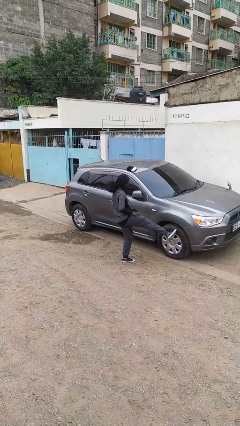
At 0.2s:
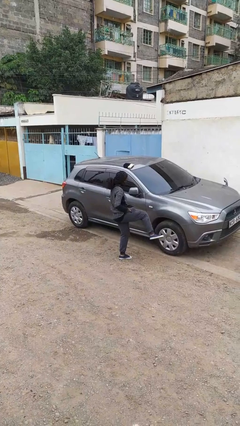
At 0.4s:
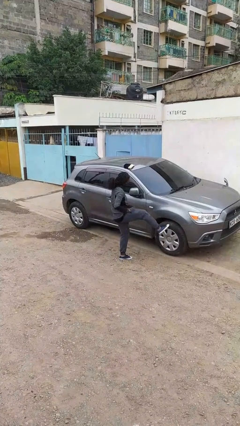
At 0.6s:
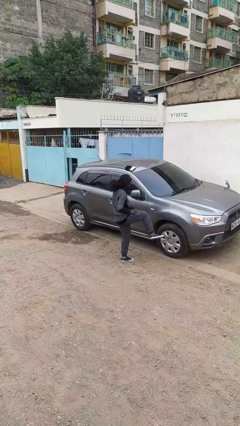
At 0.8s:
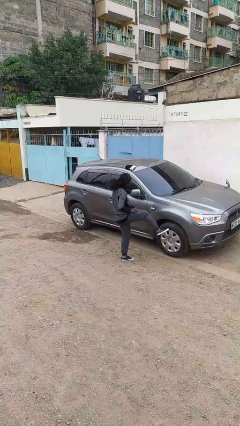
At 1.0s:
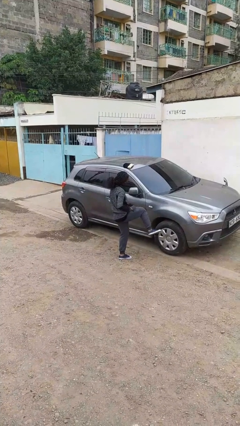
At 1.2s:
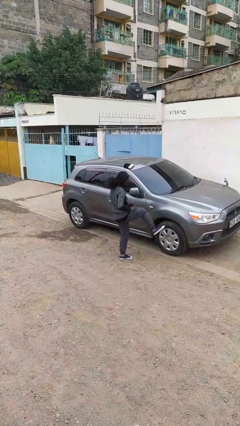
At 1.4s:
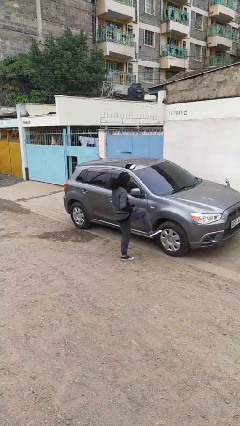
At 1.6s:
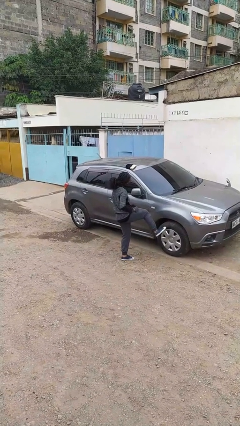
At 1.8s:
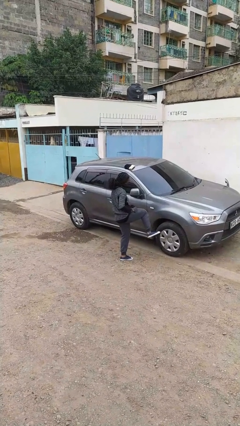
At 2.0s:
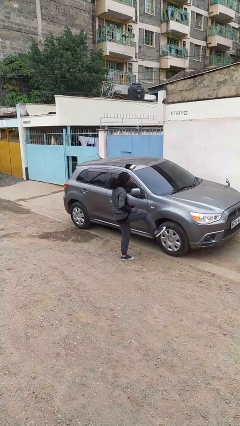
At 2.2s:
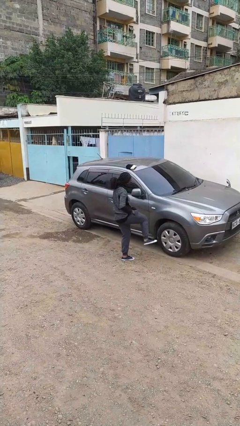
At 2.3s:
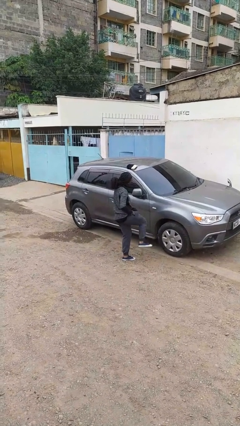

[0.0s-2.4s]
person kicks car tires

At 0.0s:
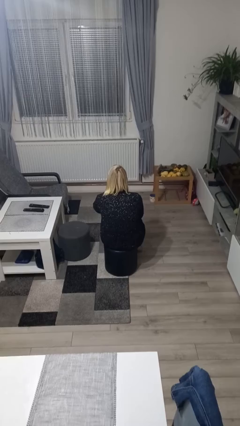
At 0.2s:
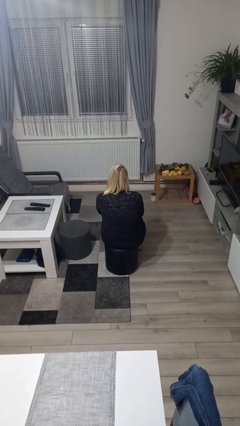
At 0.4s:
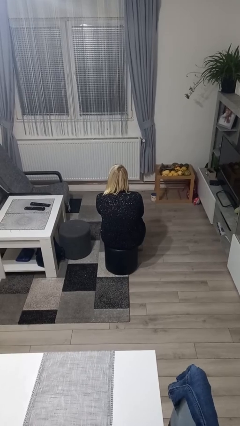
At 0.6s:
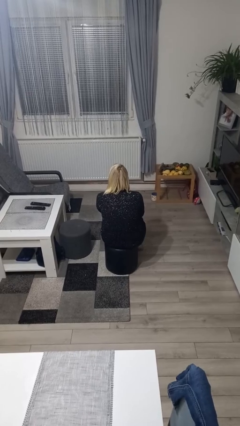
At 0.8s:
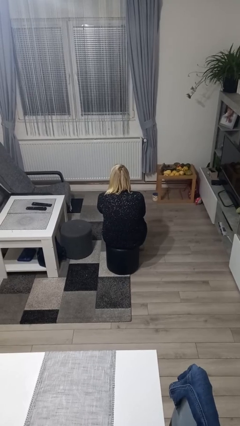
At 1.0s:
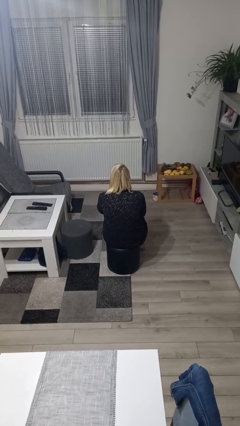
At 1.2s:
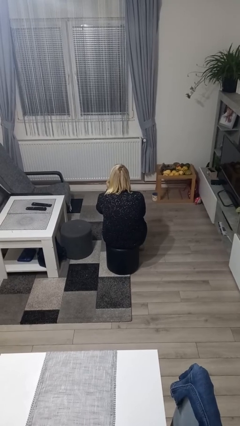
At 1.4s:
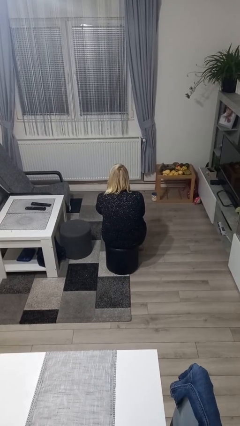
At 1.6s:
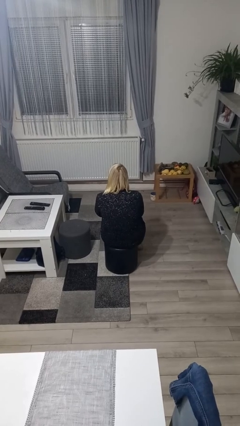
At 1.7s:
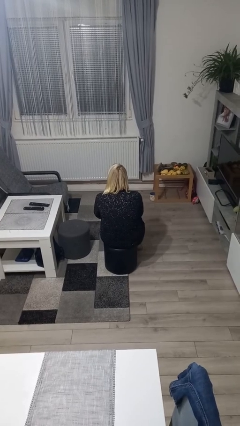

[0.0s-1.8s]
person strokes chin

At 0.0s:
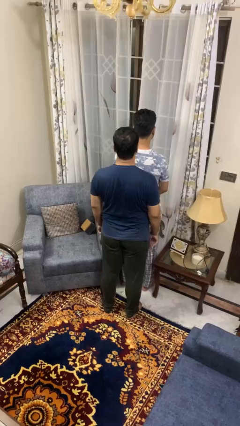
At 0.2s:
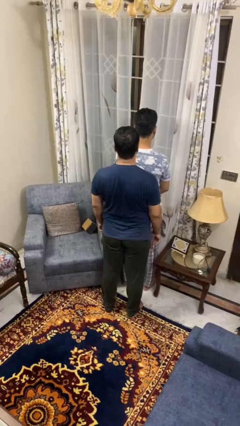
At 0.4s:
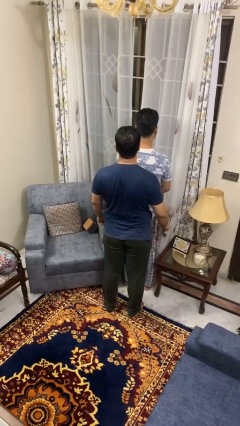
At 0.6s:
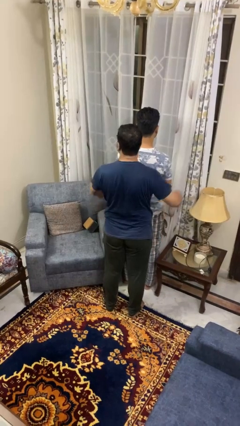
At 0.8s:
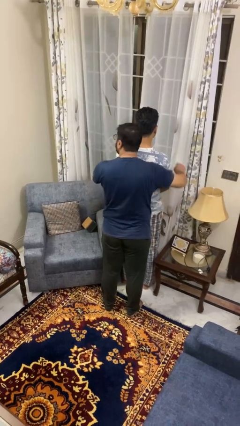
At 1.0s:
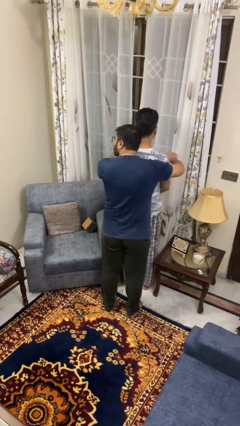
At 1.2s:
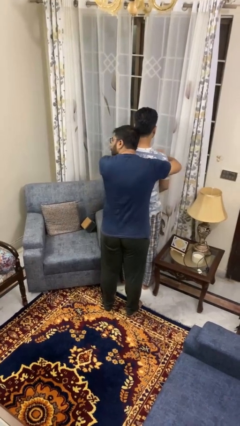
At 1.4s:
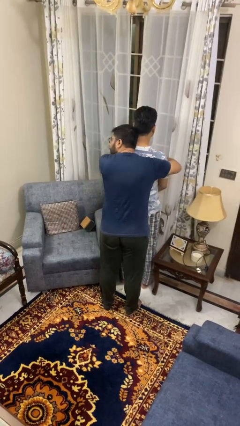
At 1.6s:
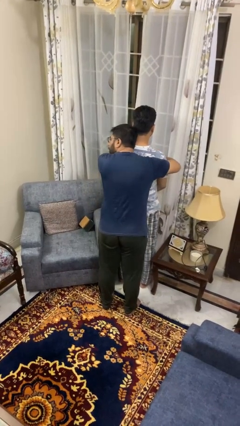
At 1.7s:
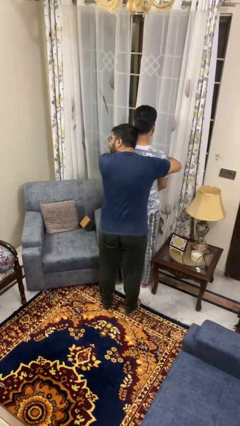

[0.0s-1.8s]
person hugs person from behind

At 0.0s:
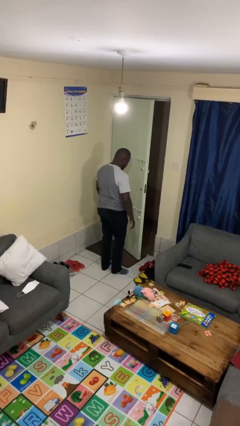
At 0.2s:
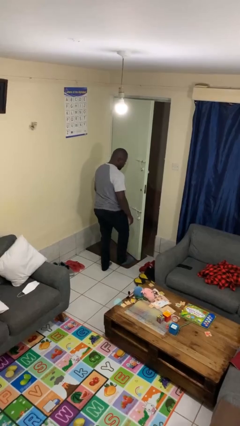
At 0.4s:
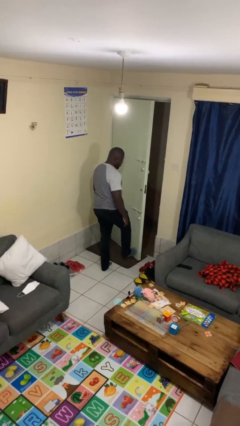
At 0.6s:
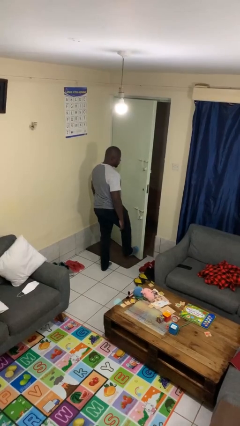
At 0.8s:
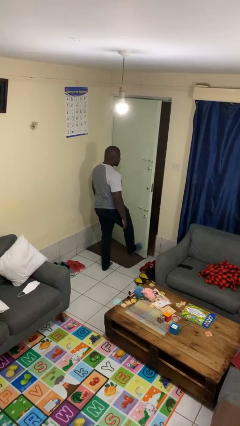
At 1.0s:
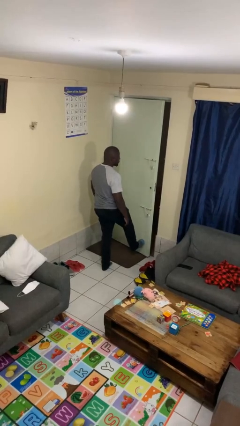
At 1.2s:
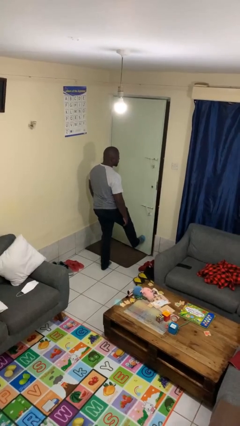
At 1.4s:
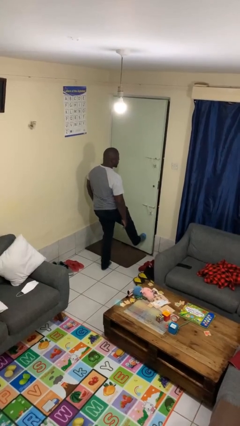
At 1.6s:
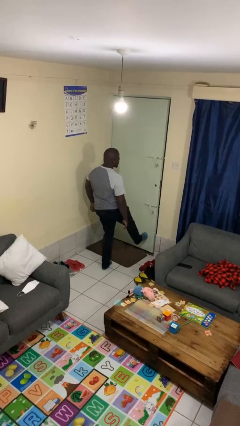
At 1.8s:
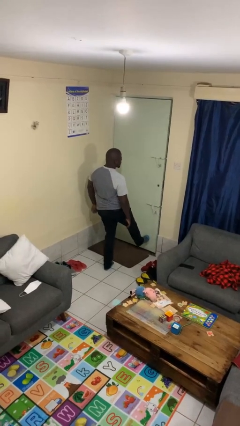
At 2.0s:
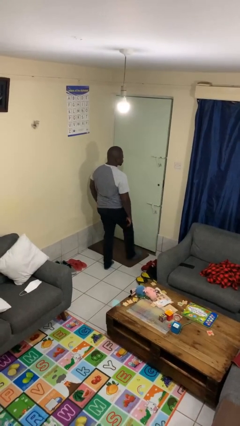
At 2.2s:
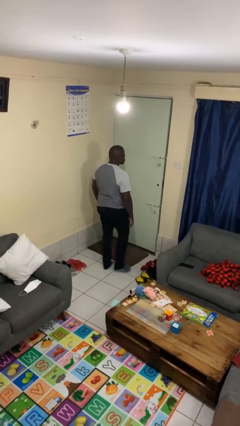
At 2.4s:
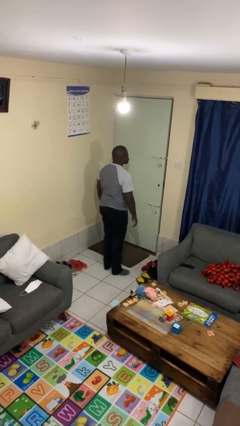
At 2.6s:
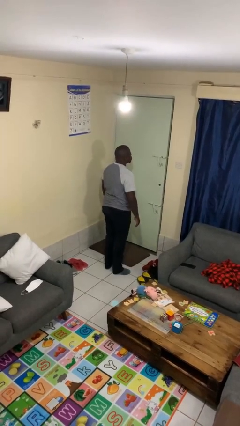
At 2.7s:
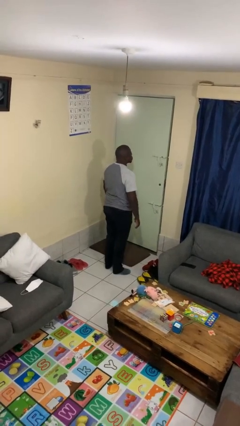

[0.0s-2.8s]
person closes door with foot

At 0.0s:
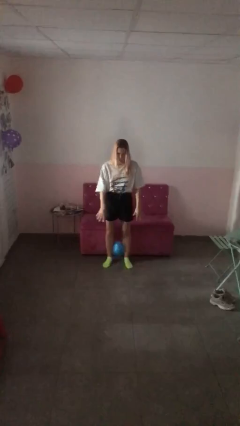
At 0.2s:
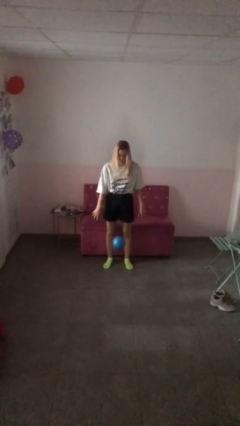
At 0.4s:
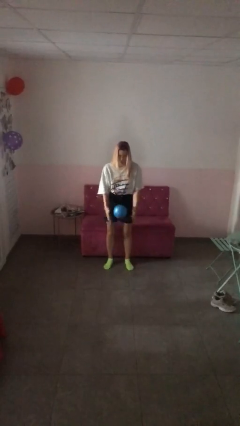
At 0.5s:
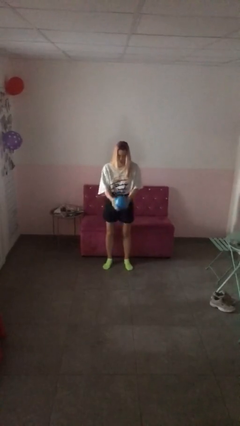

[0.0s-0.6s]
person bounces ball on floor

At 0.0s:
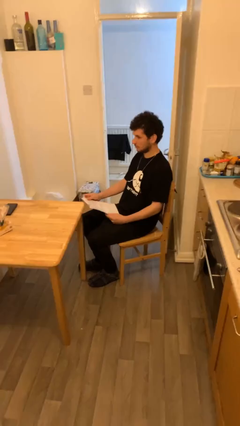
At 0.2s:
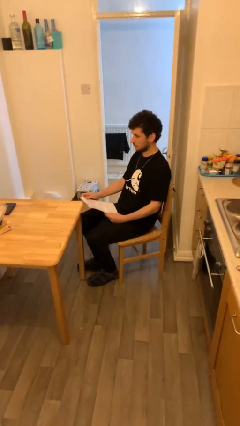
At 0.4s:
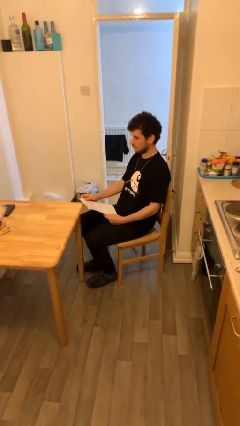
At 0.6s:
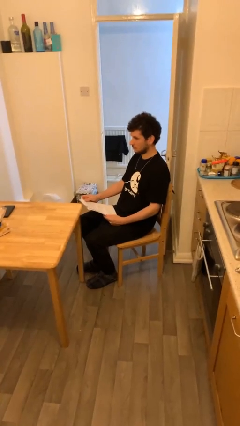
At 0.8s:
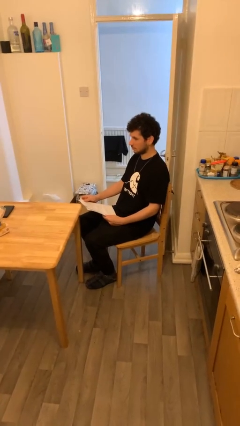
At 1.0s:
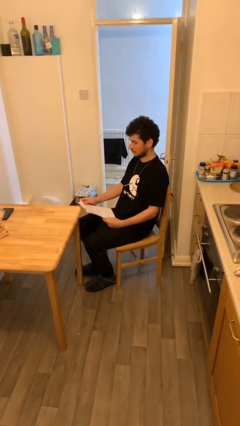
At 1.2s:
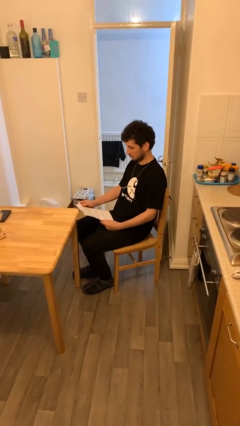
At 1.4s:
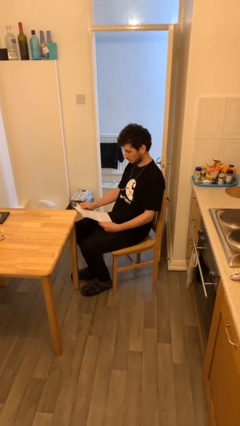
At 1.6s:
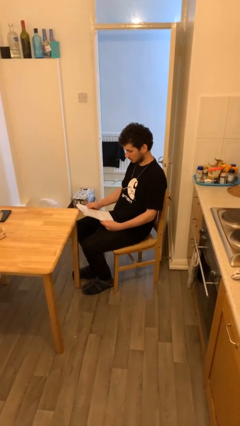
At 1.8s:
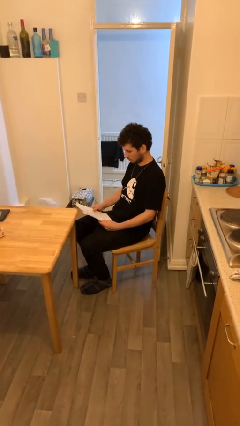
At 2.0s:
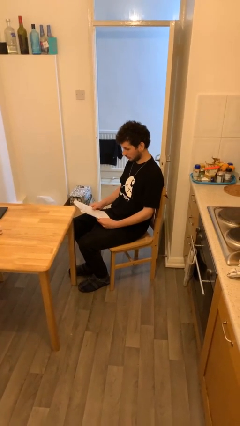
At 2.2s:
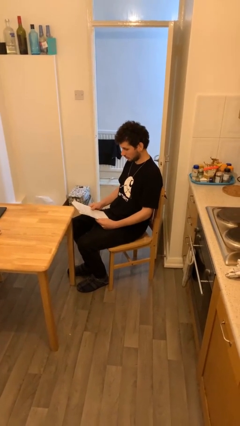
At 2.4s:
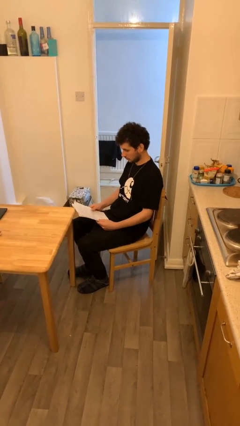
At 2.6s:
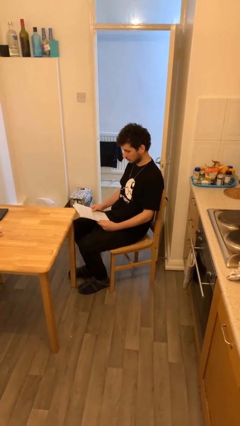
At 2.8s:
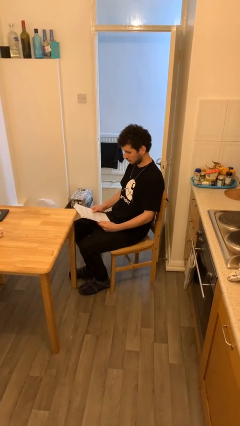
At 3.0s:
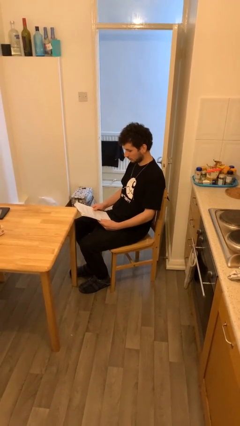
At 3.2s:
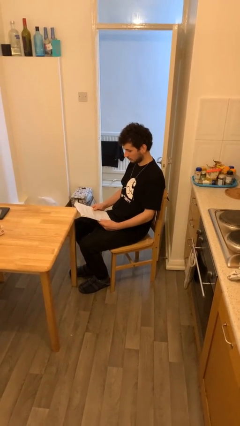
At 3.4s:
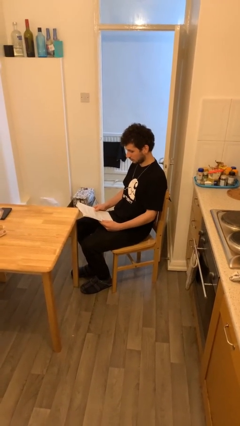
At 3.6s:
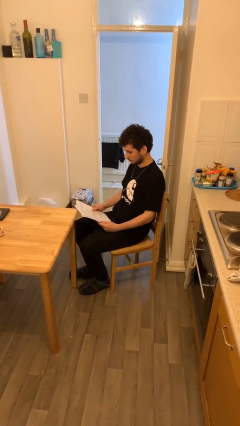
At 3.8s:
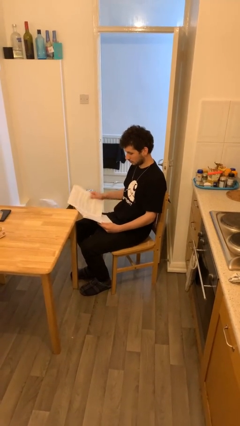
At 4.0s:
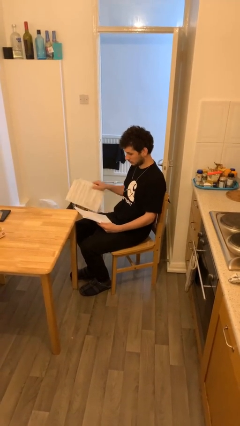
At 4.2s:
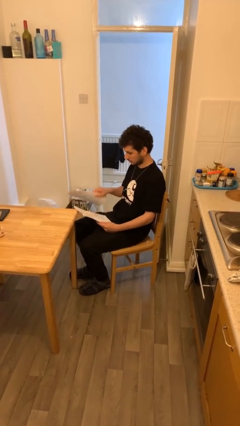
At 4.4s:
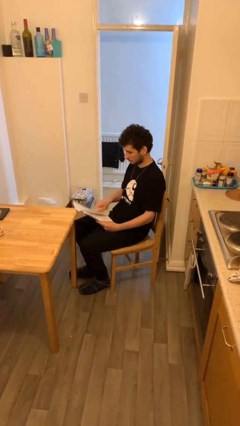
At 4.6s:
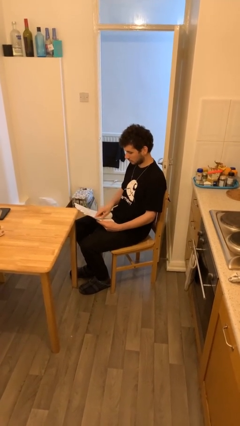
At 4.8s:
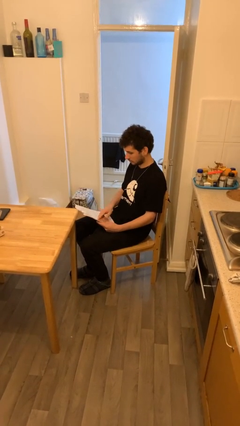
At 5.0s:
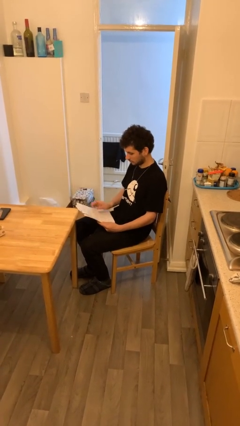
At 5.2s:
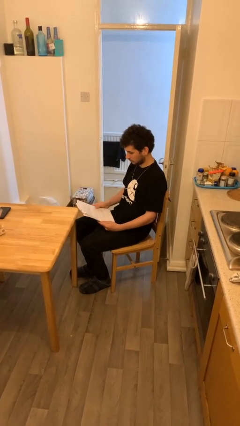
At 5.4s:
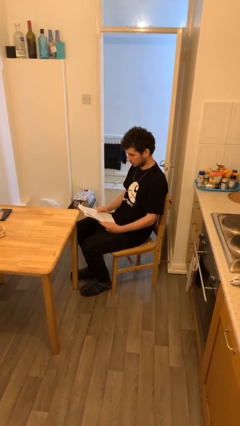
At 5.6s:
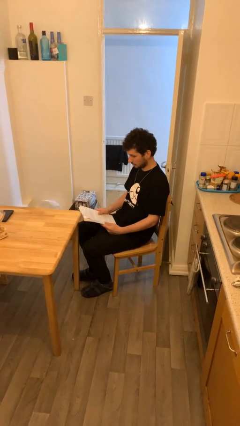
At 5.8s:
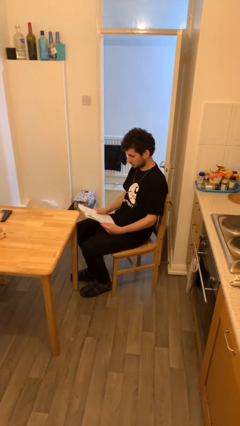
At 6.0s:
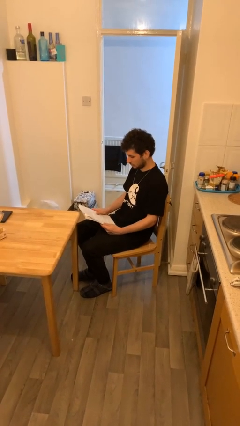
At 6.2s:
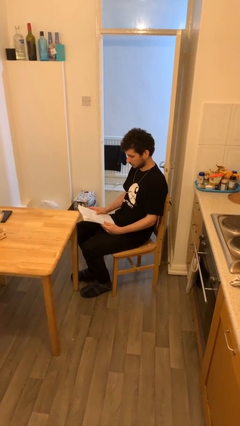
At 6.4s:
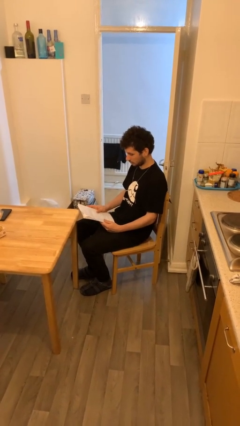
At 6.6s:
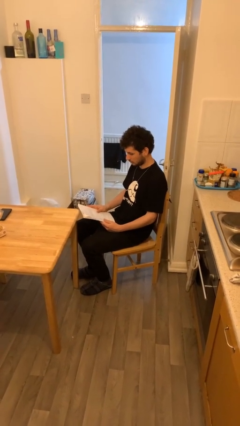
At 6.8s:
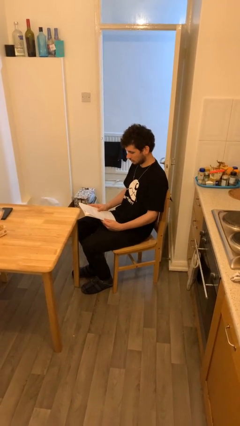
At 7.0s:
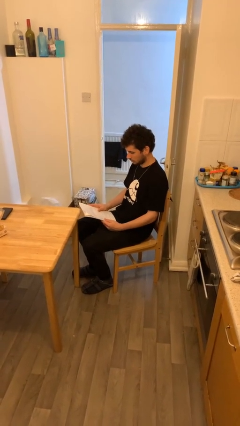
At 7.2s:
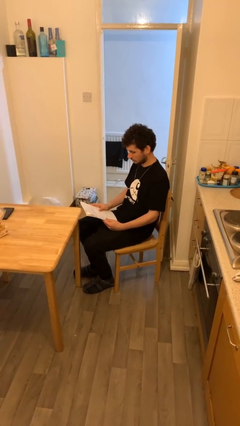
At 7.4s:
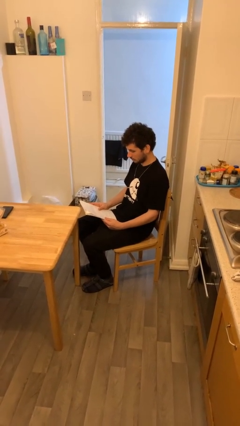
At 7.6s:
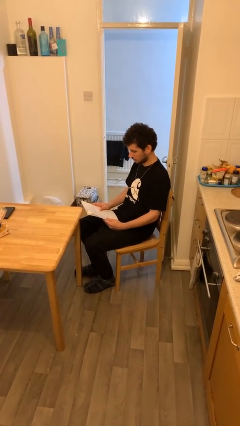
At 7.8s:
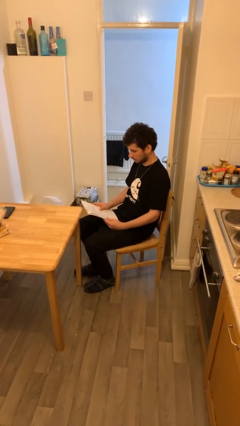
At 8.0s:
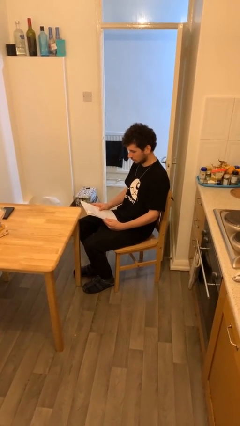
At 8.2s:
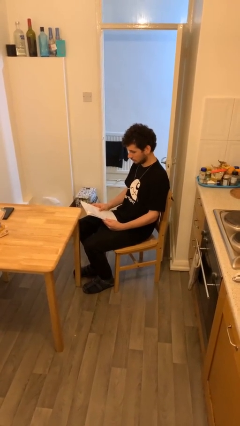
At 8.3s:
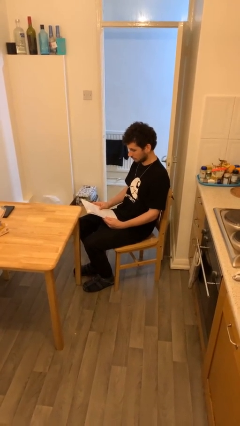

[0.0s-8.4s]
person reads document
